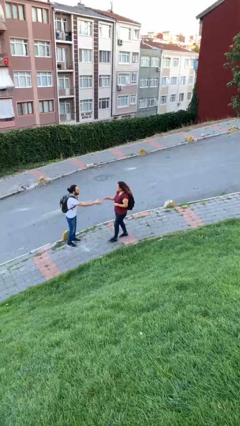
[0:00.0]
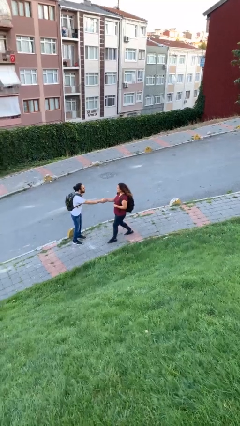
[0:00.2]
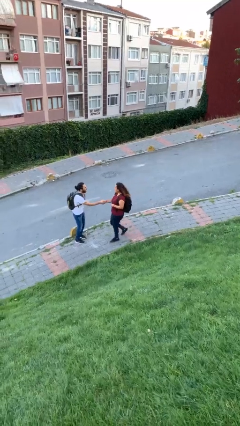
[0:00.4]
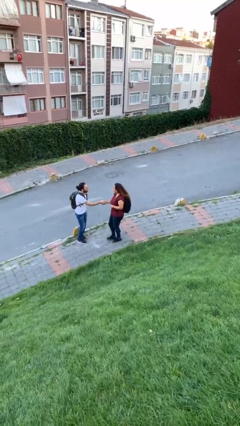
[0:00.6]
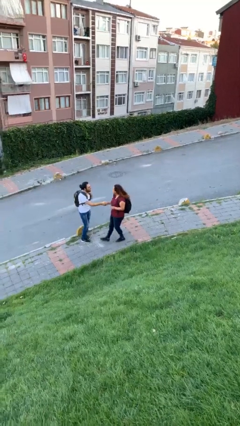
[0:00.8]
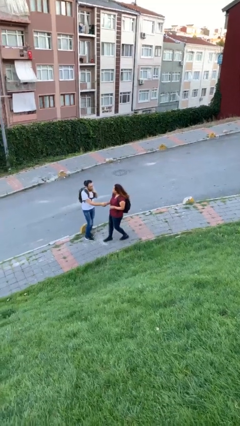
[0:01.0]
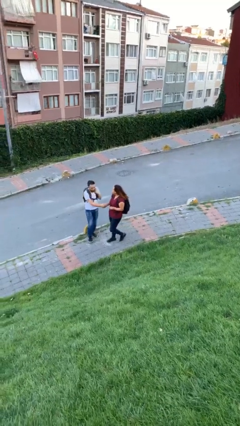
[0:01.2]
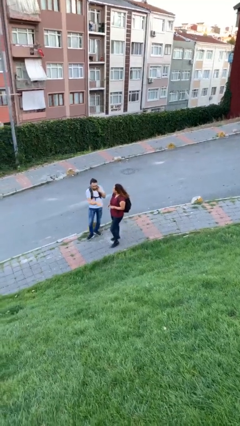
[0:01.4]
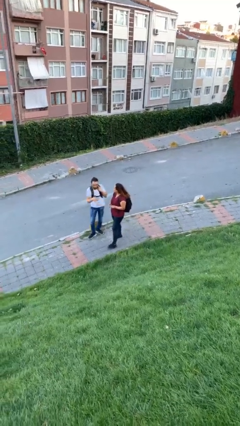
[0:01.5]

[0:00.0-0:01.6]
person shakes hand

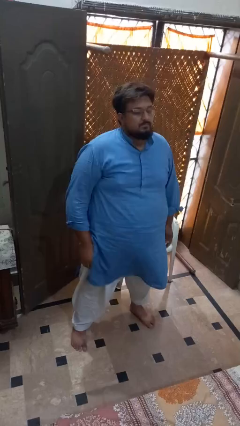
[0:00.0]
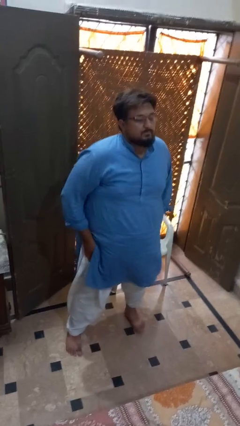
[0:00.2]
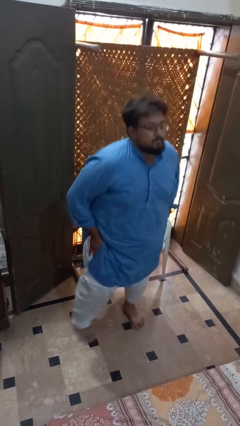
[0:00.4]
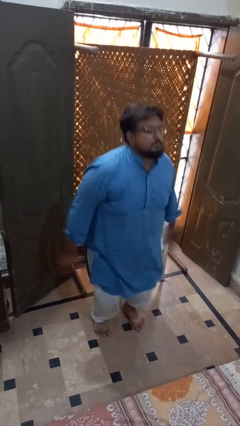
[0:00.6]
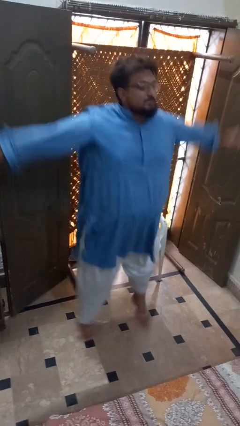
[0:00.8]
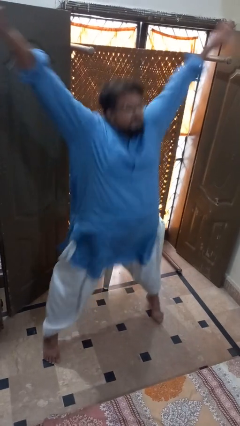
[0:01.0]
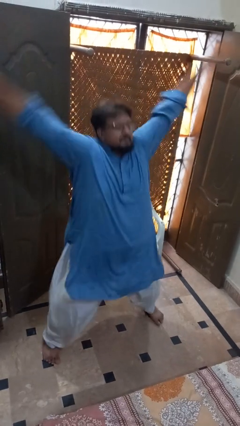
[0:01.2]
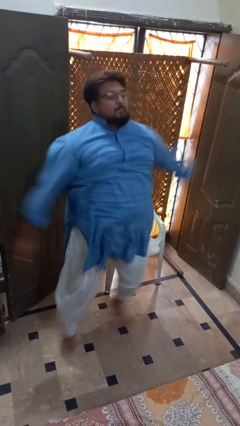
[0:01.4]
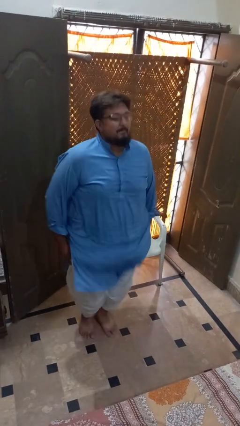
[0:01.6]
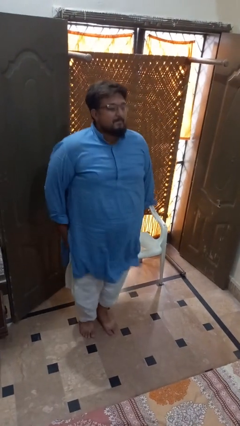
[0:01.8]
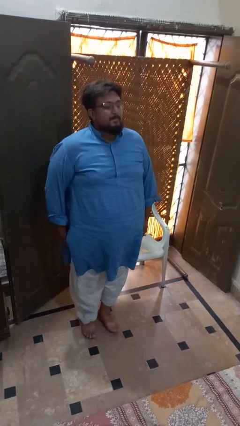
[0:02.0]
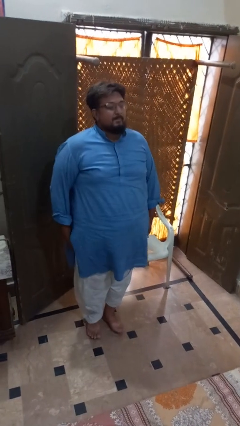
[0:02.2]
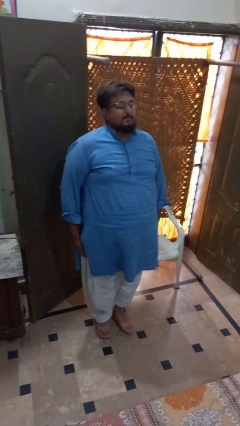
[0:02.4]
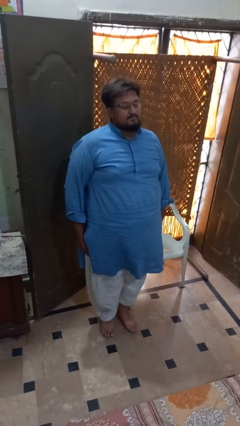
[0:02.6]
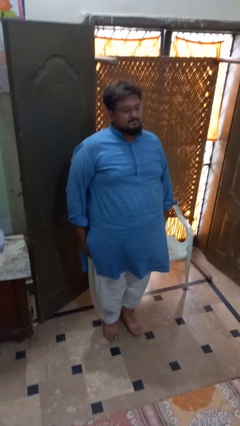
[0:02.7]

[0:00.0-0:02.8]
person exercises with jumping jacks

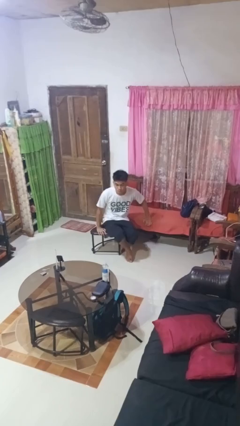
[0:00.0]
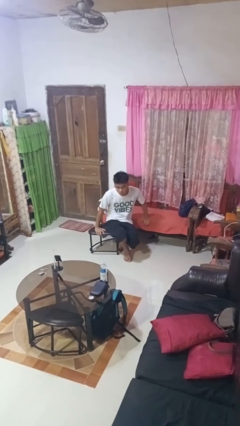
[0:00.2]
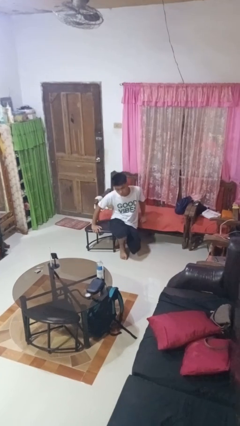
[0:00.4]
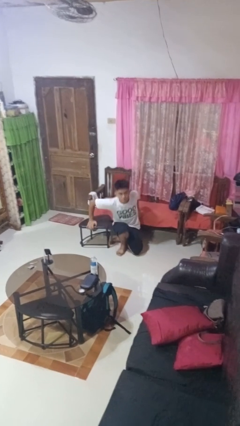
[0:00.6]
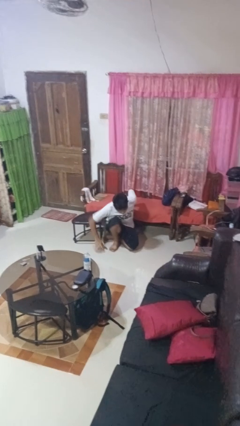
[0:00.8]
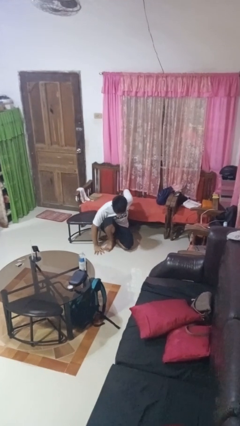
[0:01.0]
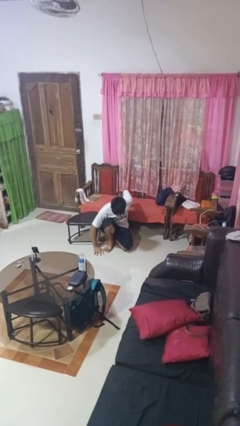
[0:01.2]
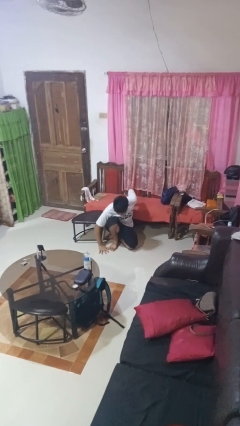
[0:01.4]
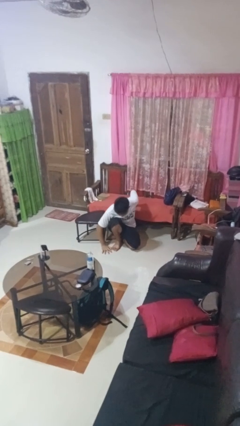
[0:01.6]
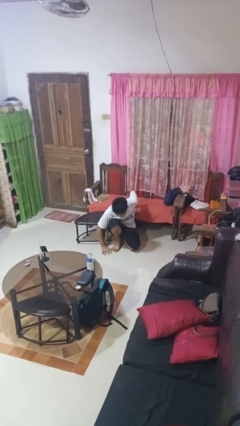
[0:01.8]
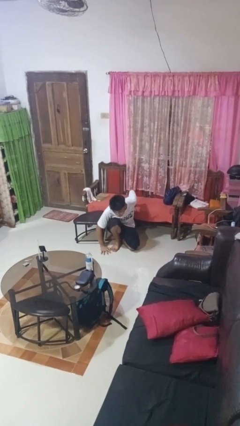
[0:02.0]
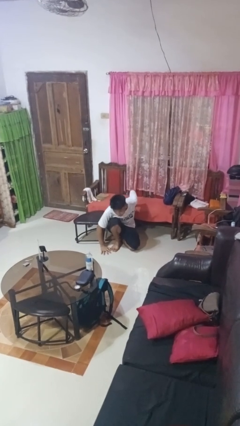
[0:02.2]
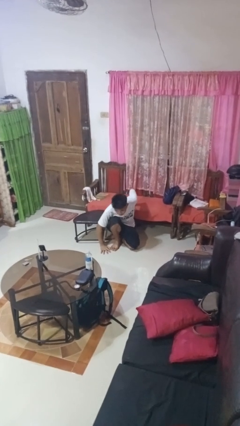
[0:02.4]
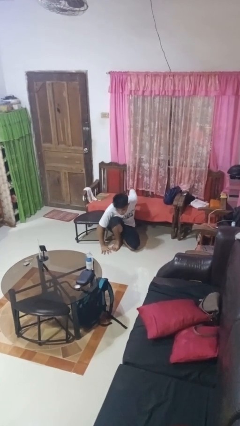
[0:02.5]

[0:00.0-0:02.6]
person falls from chair

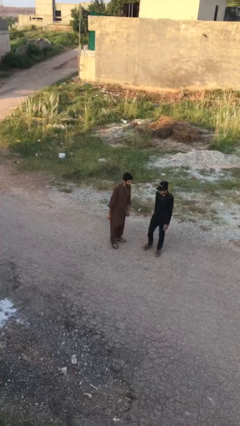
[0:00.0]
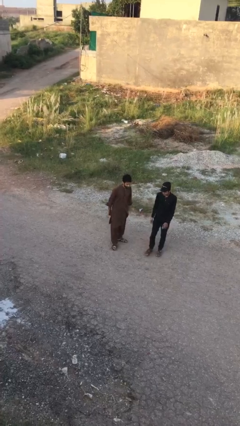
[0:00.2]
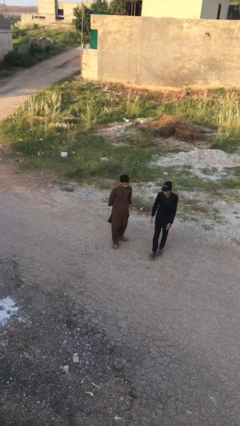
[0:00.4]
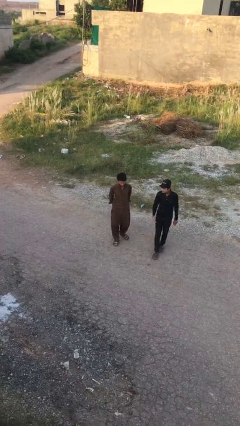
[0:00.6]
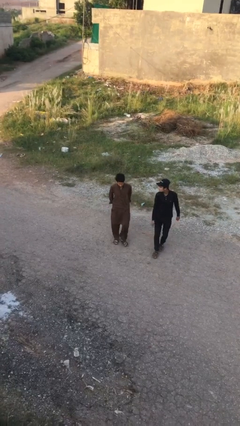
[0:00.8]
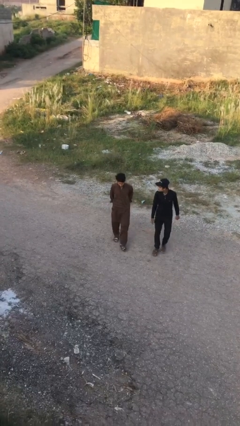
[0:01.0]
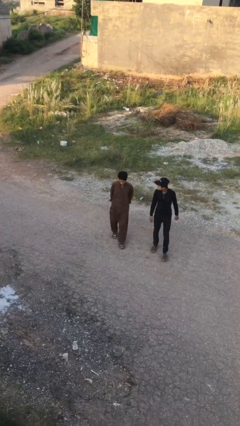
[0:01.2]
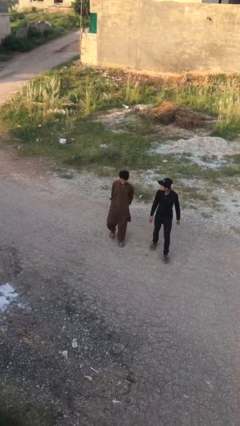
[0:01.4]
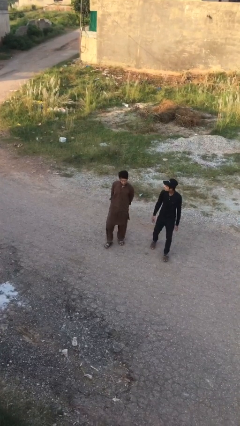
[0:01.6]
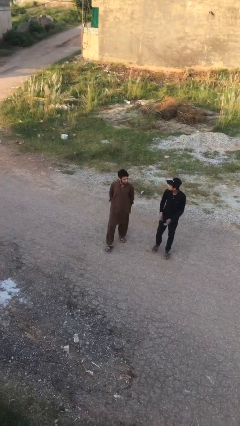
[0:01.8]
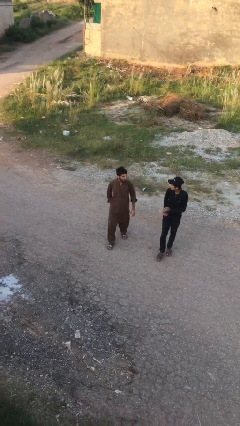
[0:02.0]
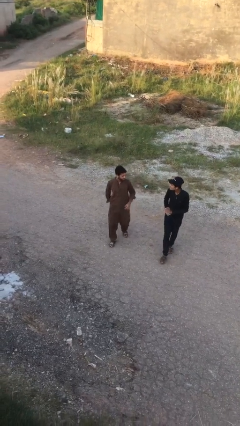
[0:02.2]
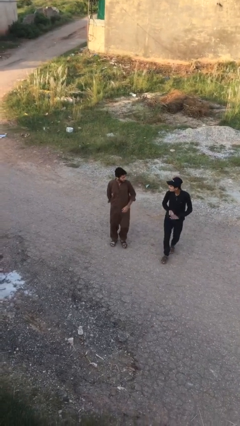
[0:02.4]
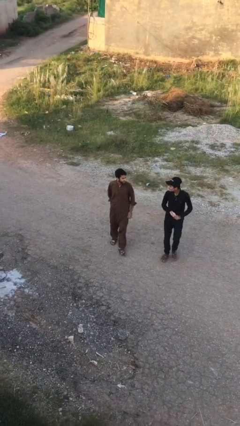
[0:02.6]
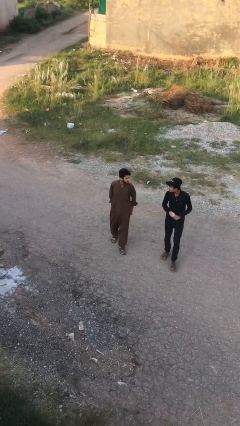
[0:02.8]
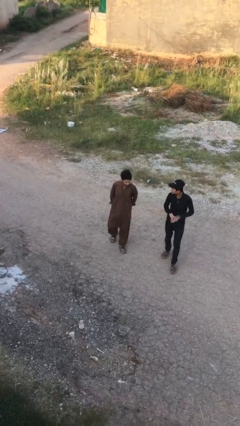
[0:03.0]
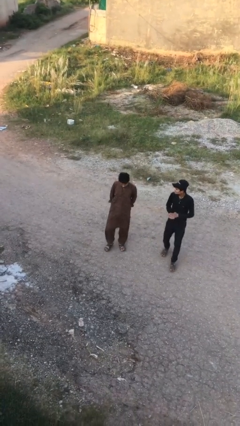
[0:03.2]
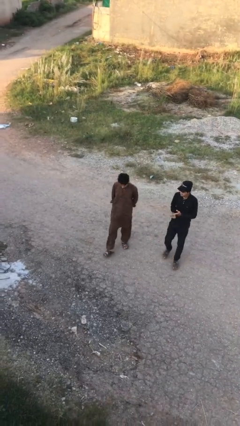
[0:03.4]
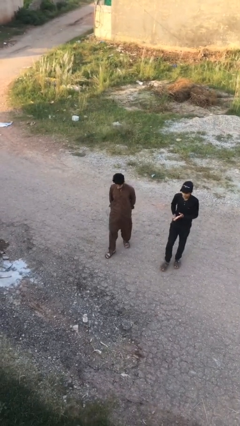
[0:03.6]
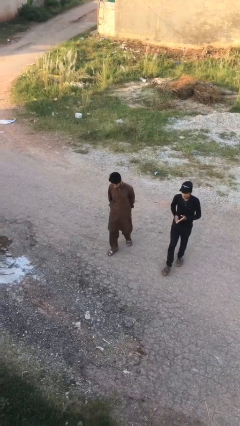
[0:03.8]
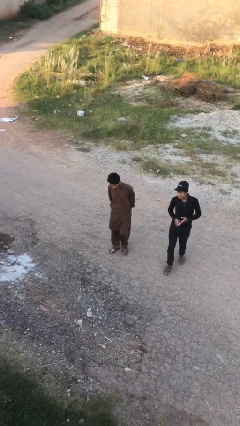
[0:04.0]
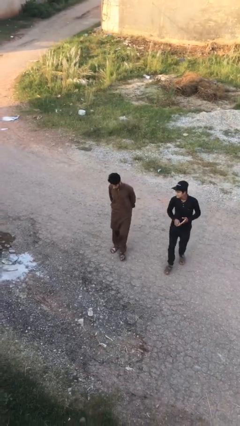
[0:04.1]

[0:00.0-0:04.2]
person talks to person

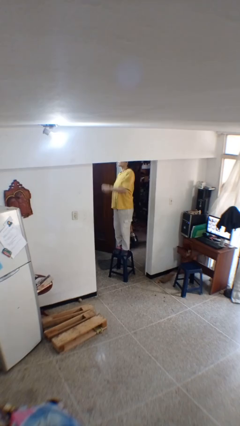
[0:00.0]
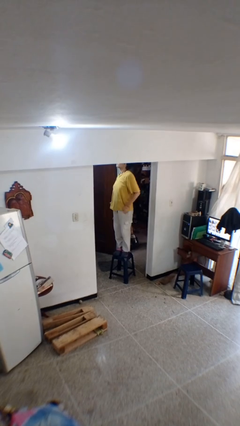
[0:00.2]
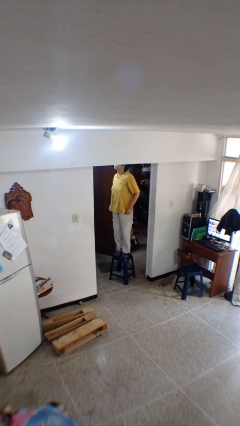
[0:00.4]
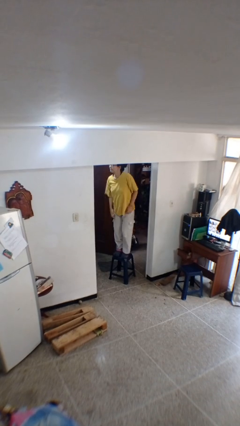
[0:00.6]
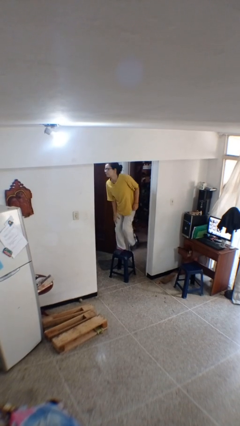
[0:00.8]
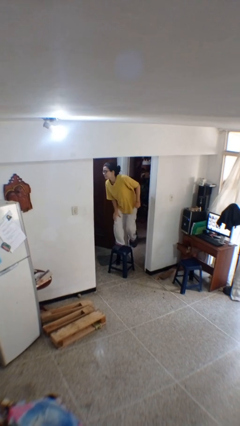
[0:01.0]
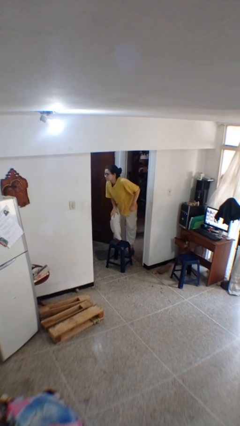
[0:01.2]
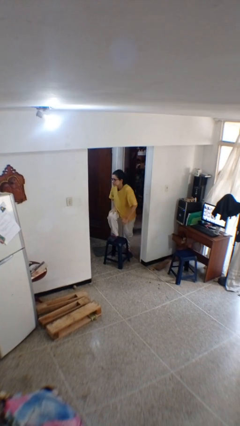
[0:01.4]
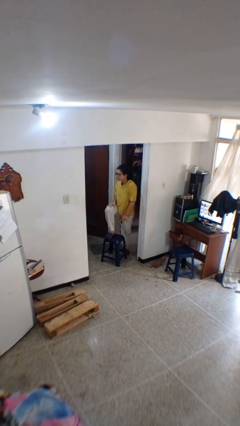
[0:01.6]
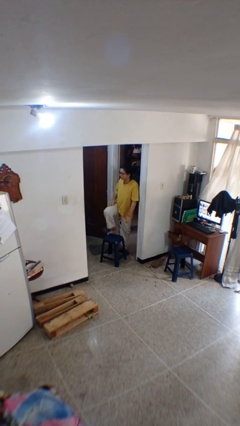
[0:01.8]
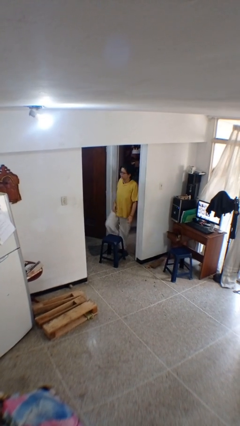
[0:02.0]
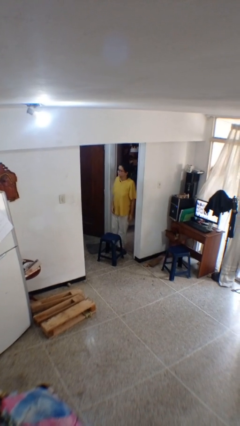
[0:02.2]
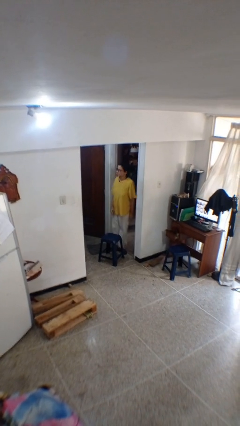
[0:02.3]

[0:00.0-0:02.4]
person climbs off chair

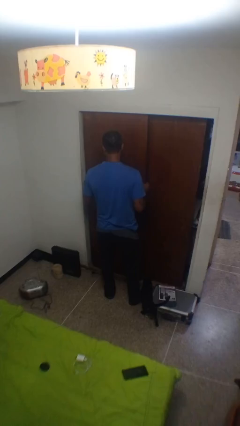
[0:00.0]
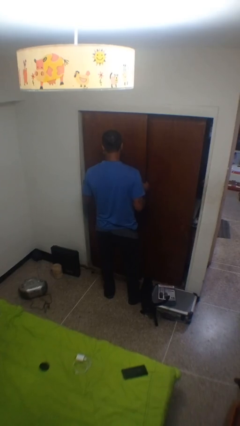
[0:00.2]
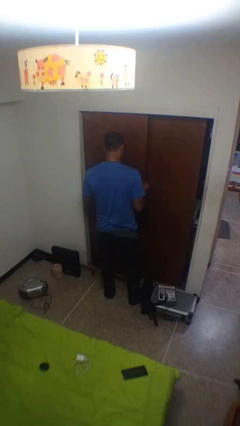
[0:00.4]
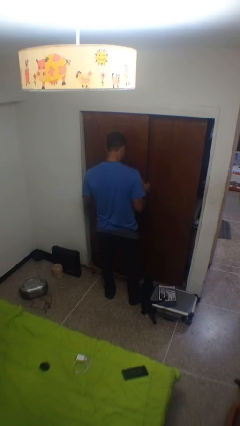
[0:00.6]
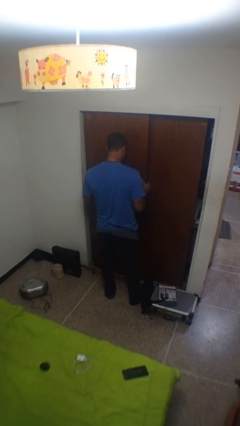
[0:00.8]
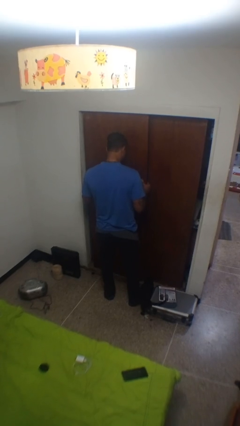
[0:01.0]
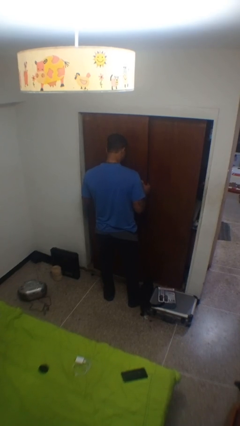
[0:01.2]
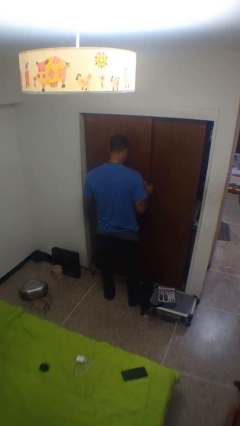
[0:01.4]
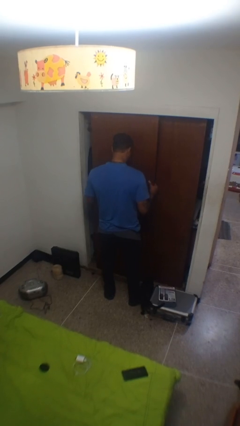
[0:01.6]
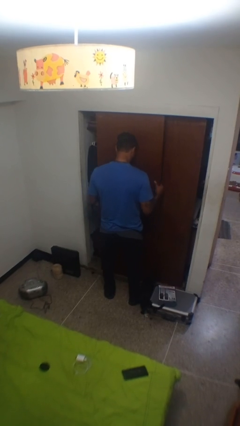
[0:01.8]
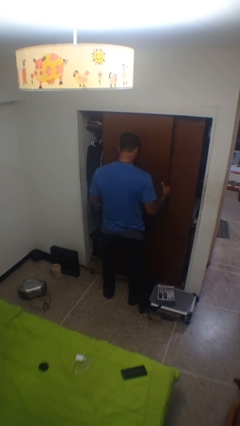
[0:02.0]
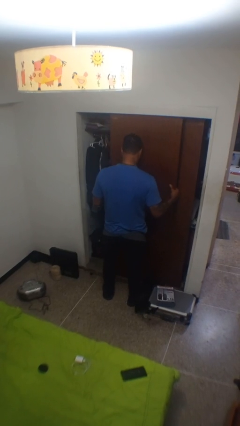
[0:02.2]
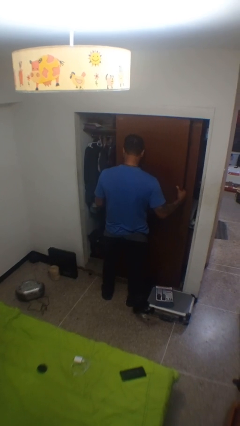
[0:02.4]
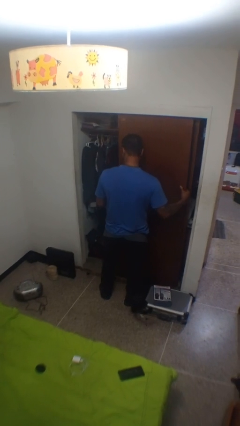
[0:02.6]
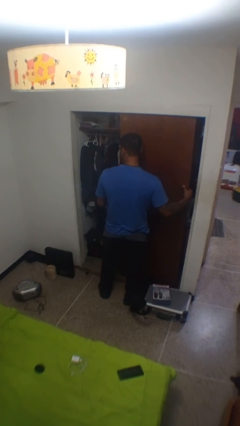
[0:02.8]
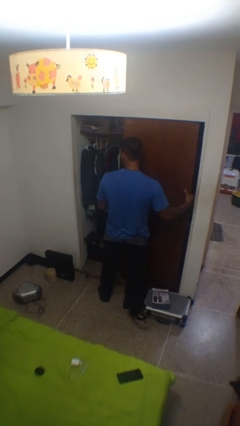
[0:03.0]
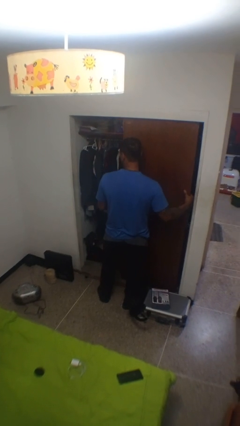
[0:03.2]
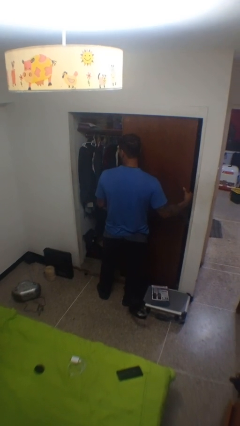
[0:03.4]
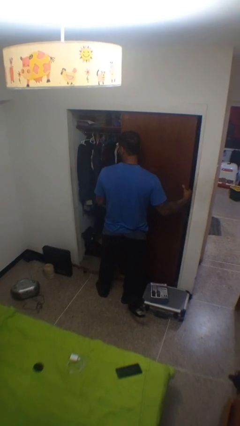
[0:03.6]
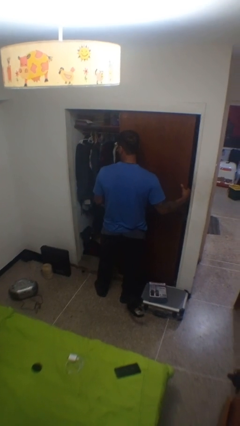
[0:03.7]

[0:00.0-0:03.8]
person opens closet door

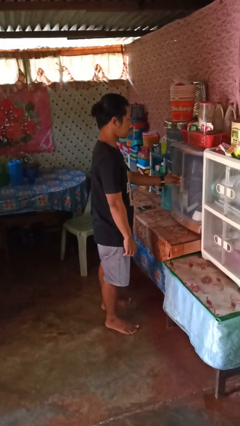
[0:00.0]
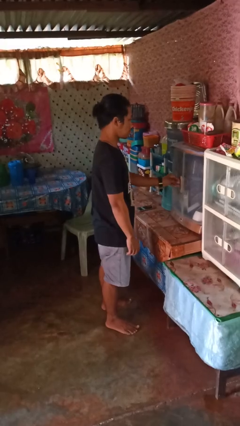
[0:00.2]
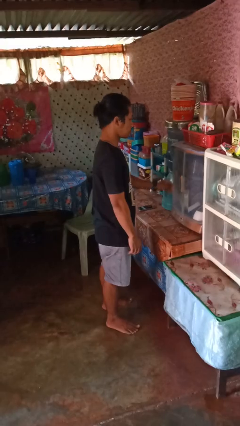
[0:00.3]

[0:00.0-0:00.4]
person closes cabinet
